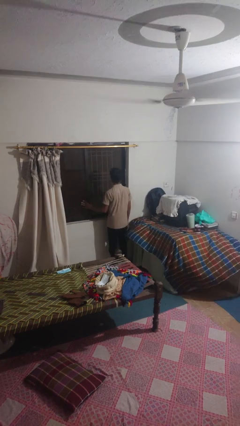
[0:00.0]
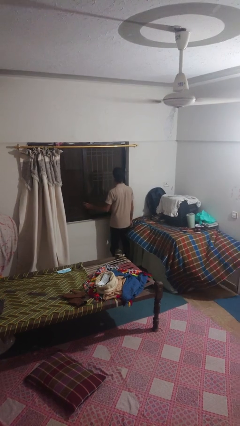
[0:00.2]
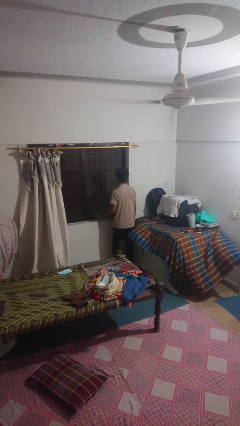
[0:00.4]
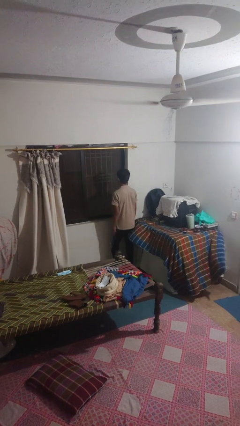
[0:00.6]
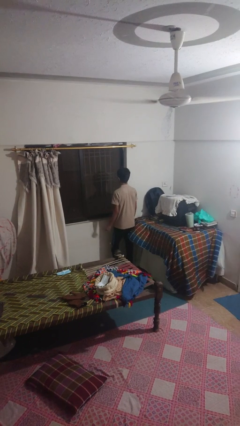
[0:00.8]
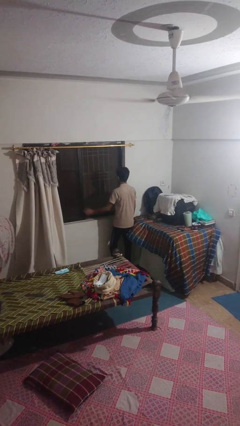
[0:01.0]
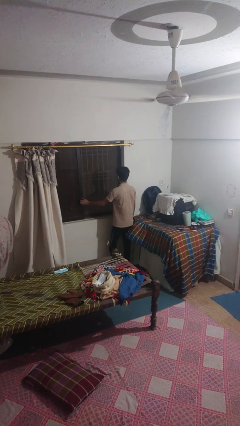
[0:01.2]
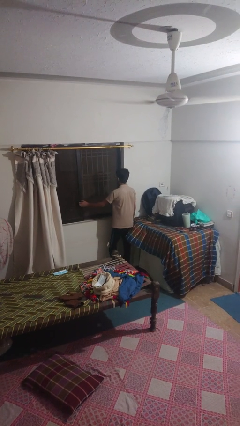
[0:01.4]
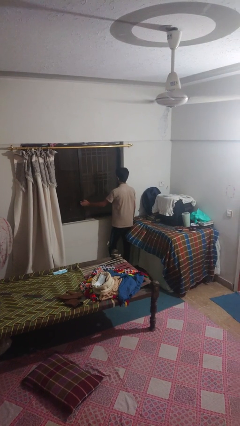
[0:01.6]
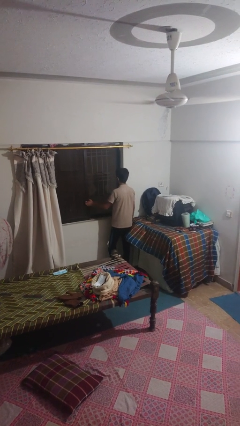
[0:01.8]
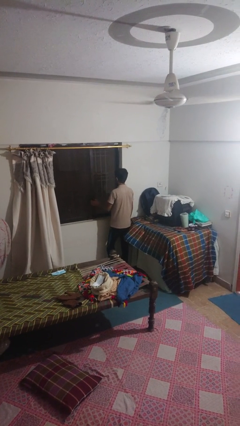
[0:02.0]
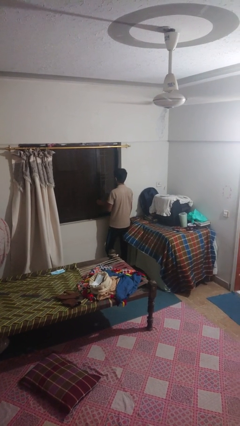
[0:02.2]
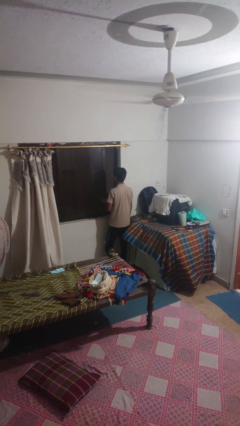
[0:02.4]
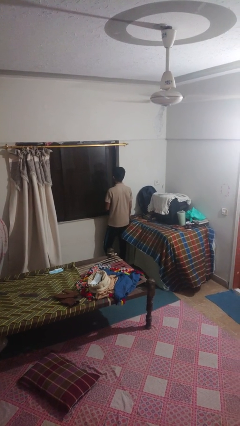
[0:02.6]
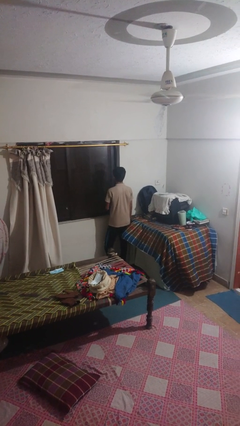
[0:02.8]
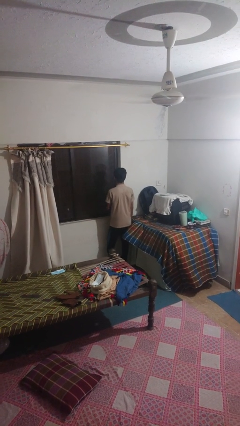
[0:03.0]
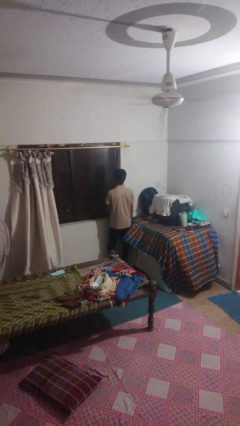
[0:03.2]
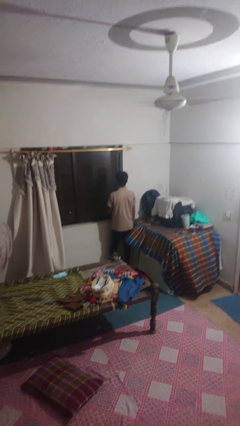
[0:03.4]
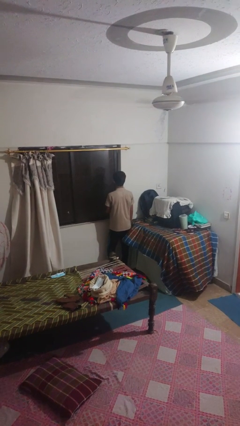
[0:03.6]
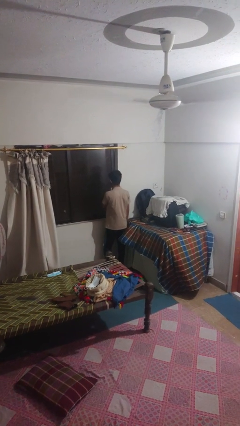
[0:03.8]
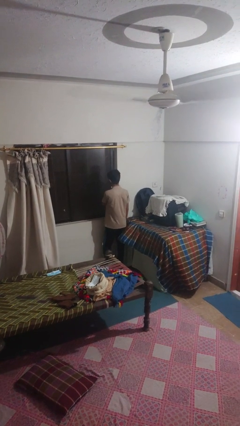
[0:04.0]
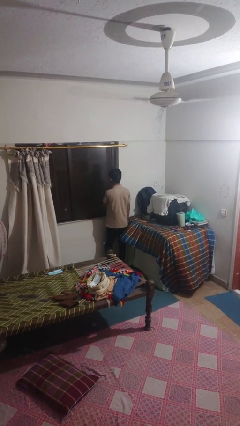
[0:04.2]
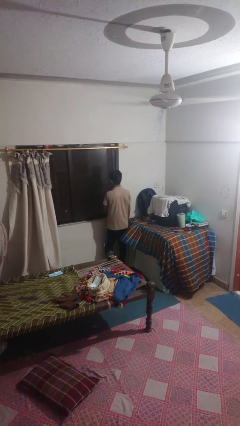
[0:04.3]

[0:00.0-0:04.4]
person closes sliding door

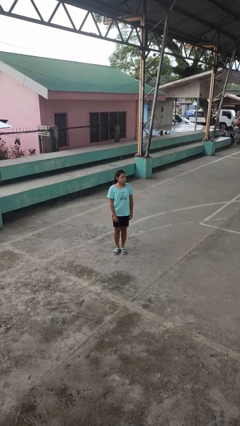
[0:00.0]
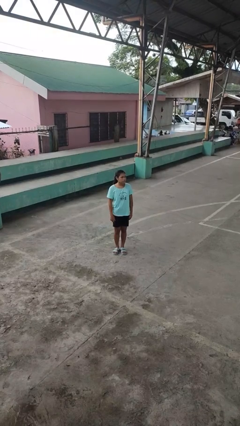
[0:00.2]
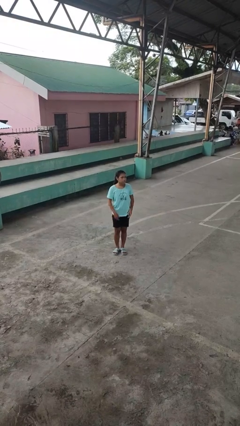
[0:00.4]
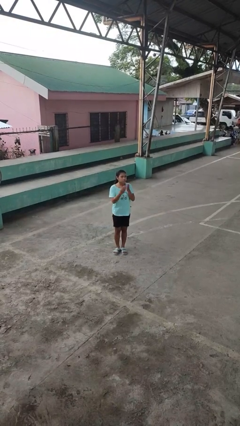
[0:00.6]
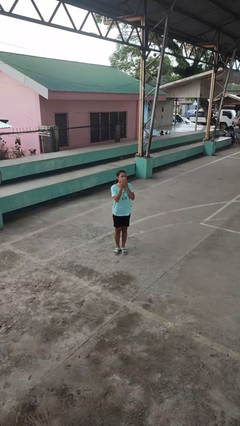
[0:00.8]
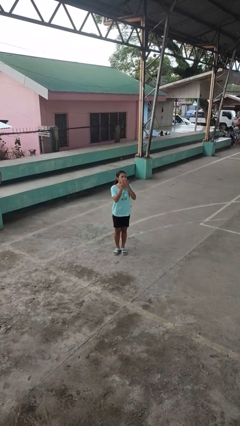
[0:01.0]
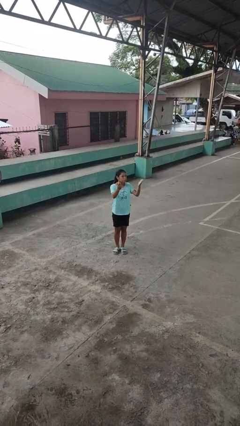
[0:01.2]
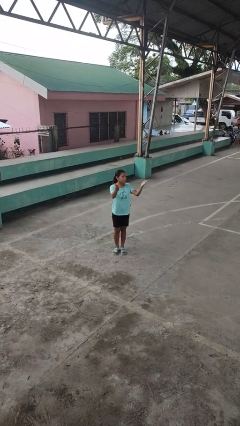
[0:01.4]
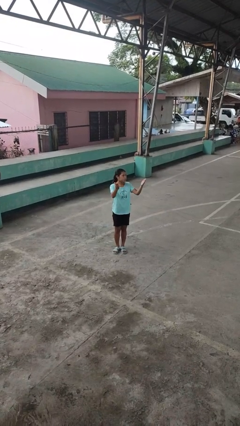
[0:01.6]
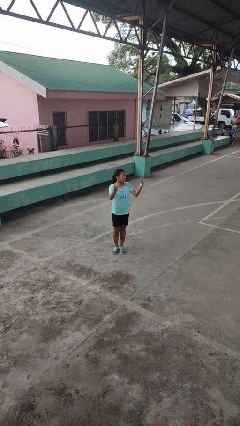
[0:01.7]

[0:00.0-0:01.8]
person gestures blow kiss

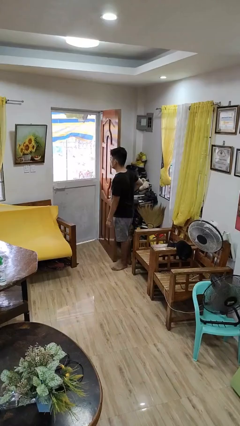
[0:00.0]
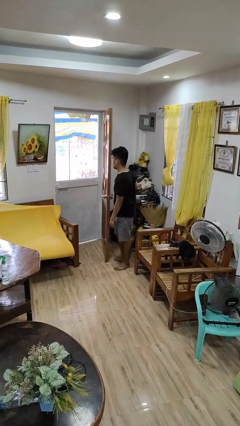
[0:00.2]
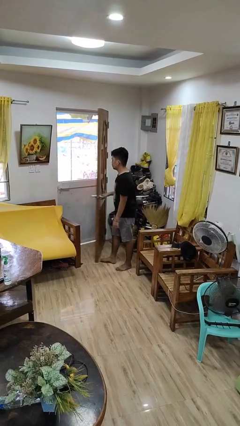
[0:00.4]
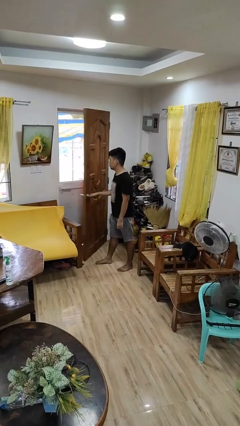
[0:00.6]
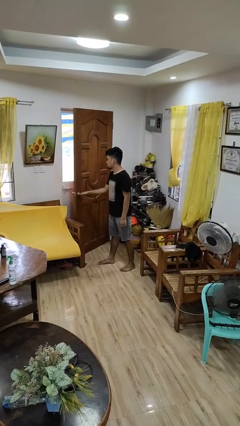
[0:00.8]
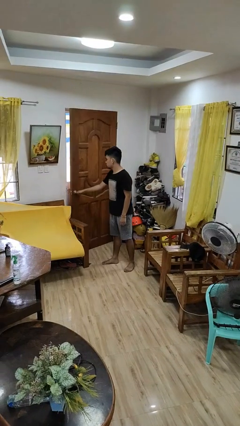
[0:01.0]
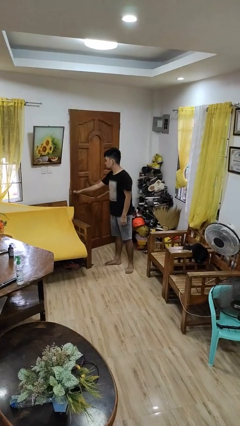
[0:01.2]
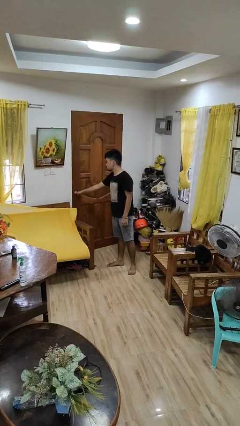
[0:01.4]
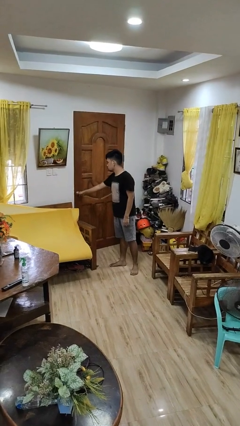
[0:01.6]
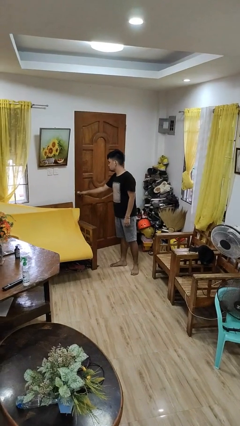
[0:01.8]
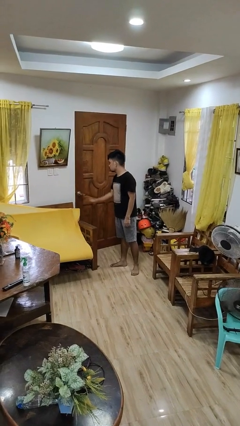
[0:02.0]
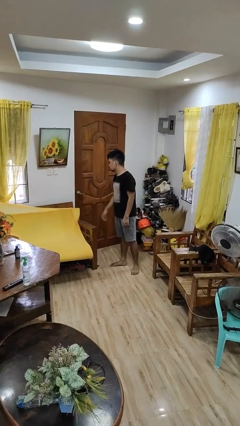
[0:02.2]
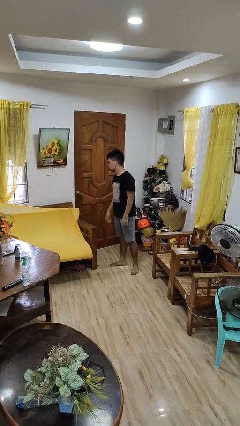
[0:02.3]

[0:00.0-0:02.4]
person closes facility door

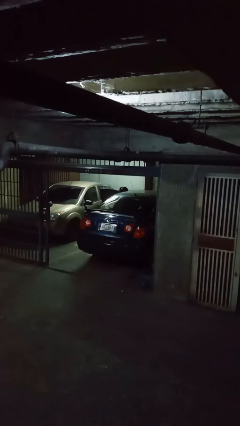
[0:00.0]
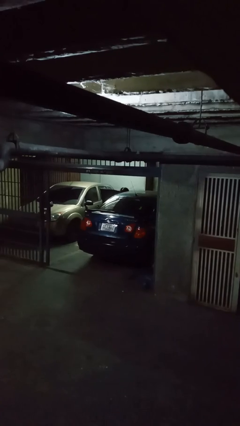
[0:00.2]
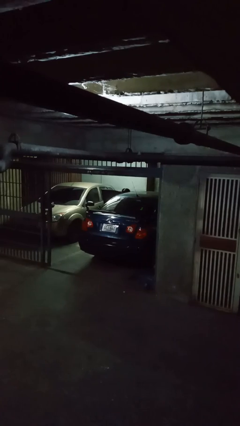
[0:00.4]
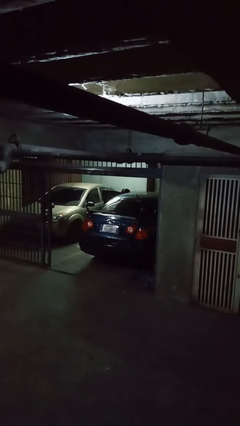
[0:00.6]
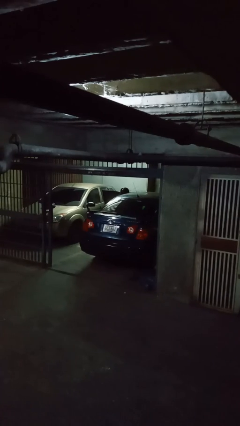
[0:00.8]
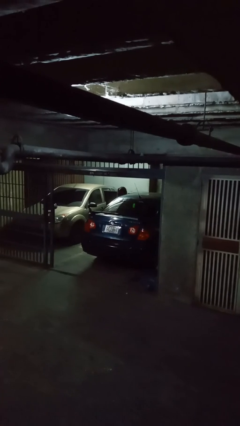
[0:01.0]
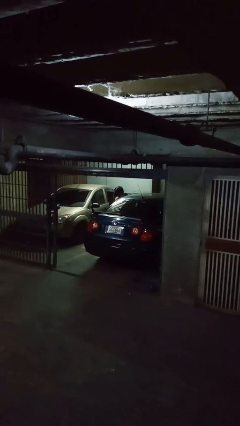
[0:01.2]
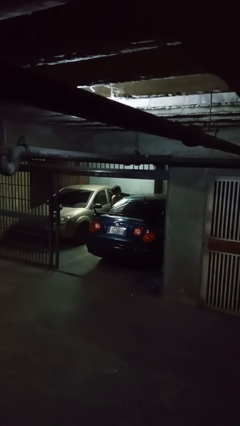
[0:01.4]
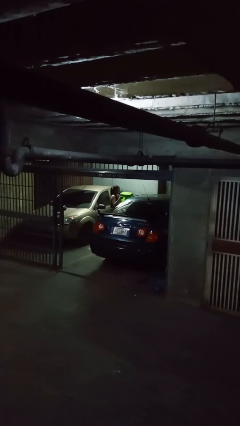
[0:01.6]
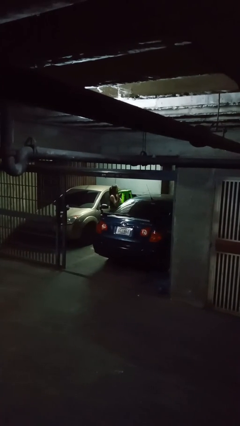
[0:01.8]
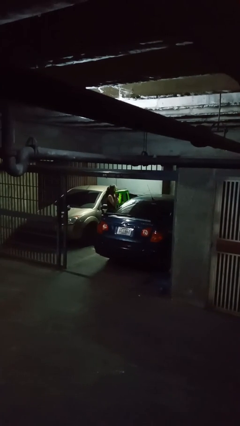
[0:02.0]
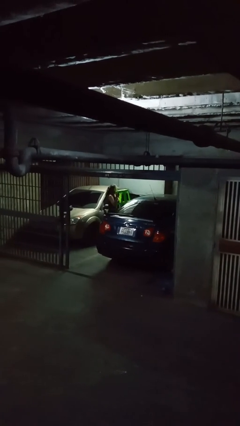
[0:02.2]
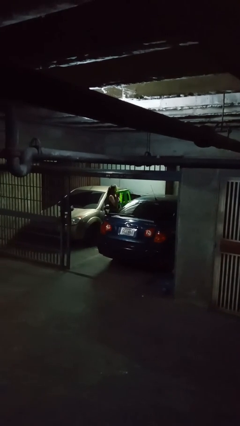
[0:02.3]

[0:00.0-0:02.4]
person unloads car

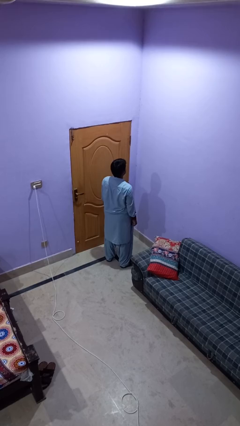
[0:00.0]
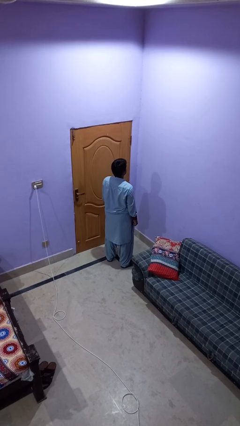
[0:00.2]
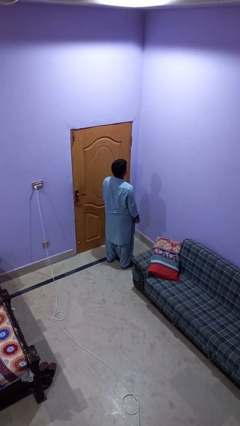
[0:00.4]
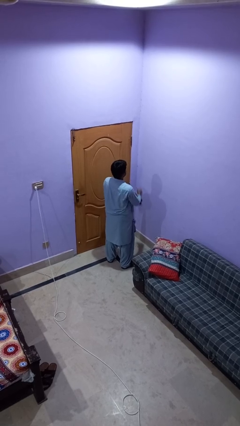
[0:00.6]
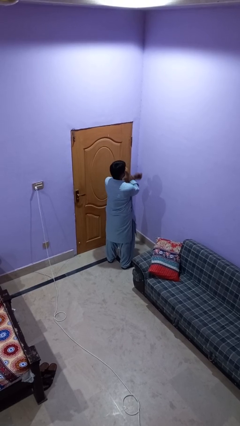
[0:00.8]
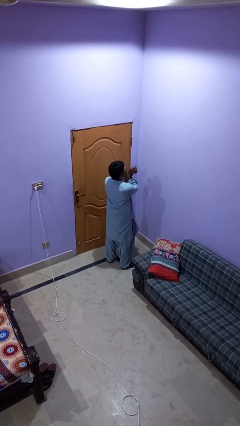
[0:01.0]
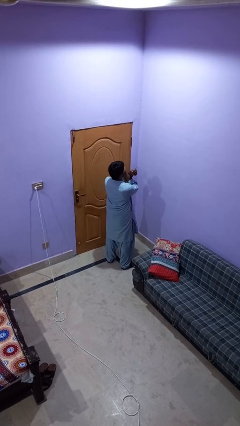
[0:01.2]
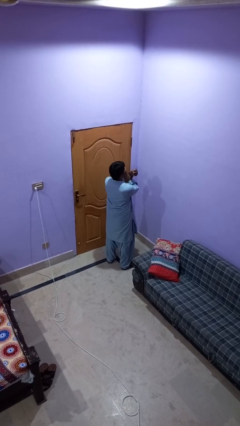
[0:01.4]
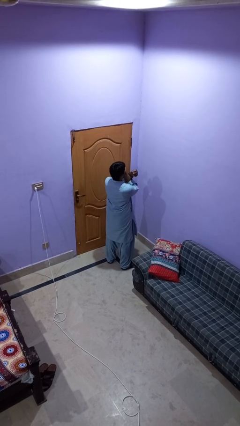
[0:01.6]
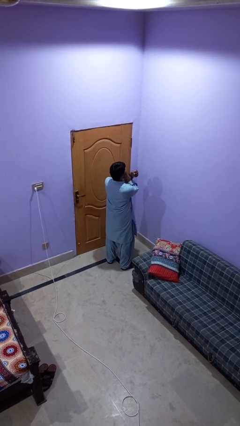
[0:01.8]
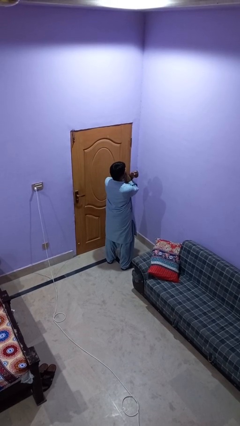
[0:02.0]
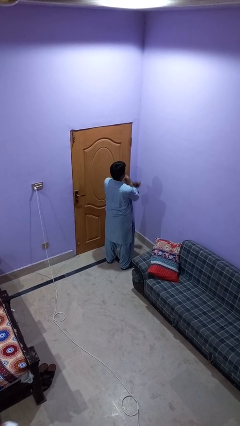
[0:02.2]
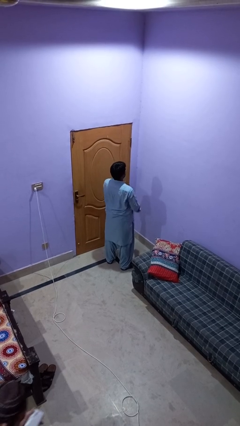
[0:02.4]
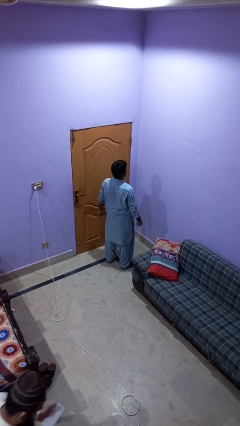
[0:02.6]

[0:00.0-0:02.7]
person gestures arms x

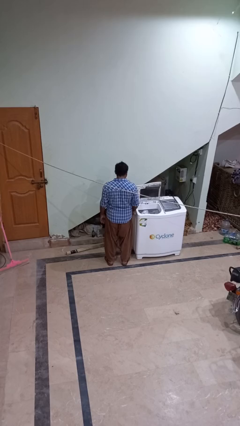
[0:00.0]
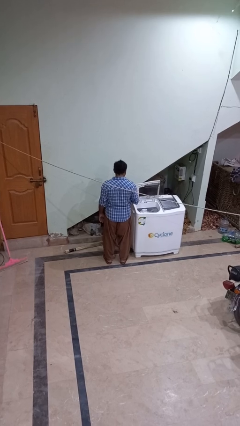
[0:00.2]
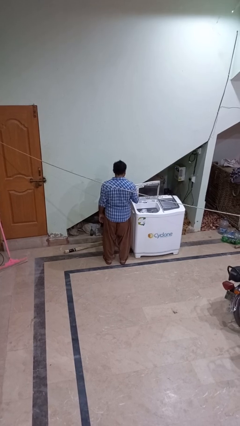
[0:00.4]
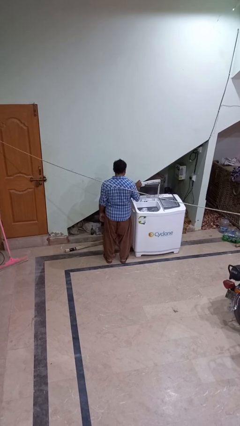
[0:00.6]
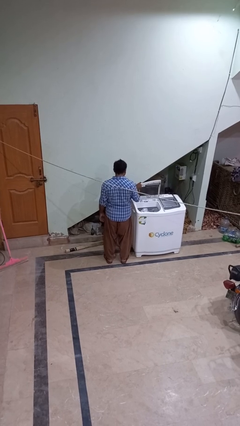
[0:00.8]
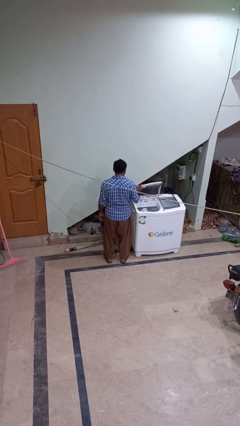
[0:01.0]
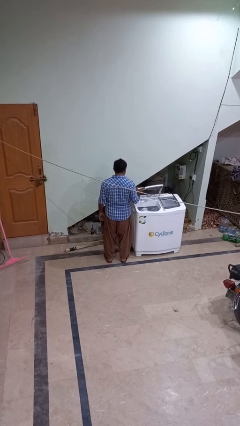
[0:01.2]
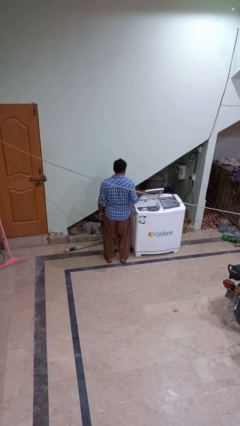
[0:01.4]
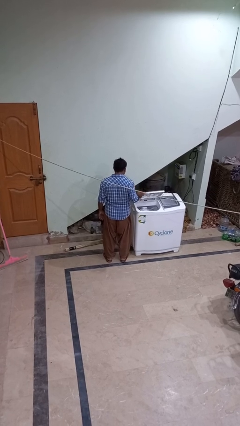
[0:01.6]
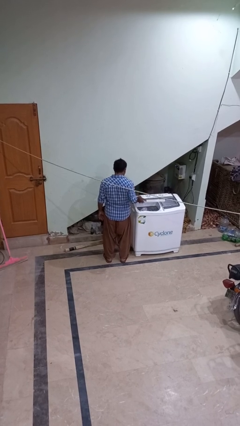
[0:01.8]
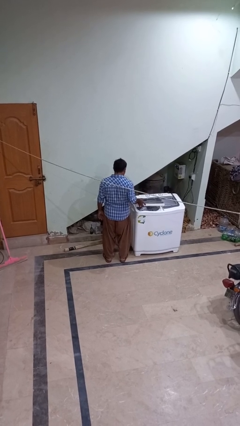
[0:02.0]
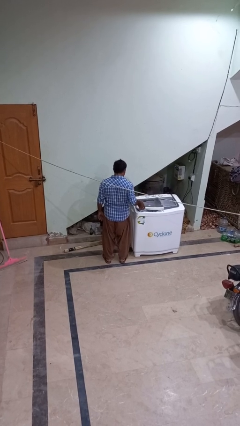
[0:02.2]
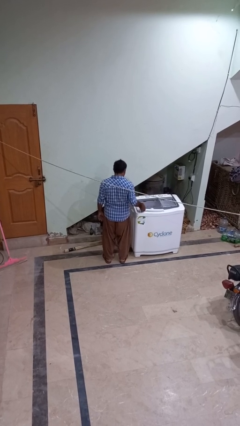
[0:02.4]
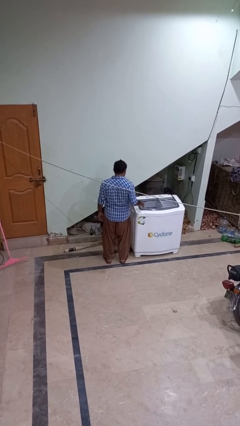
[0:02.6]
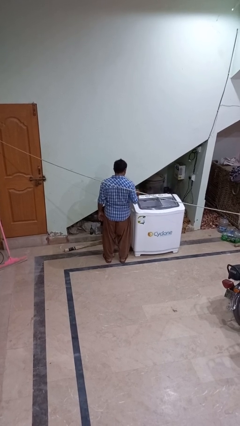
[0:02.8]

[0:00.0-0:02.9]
person closes clothes washer

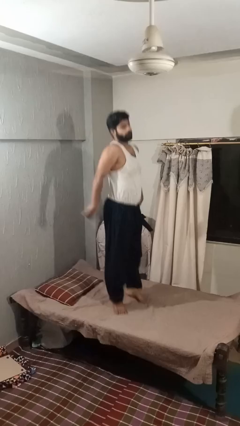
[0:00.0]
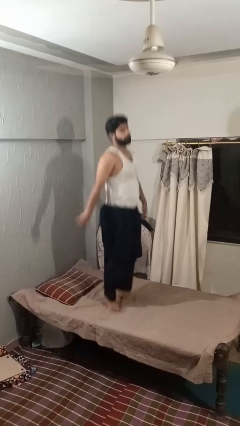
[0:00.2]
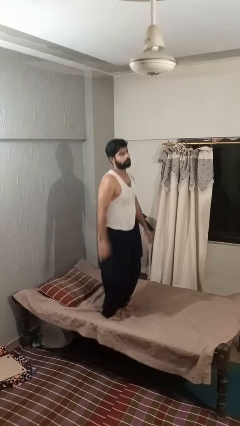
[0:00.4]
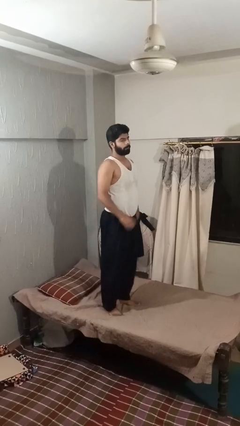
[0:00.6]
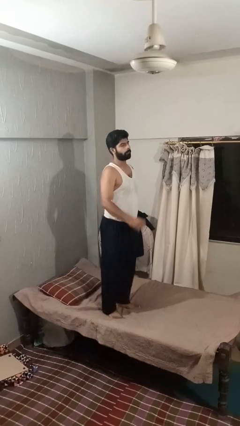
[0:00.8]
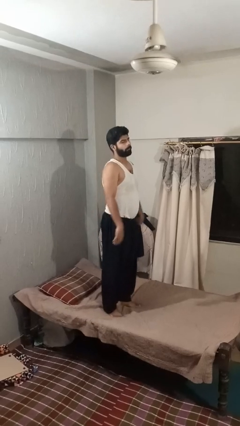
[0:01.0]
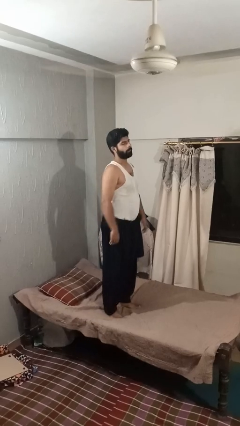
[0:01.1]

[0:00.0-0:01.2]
person jumps on bed
